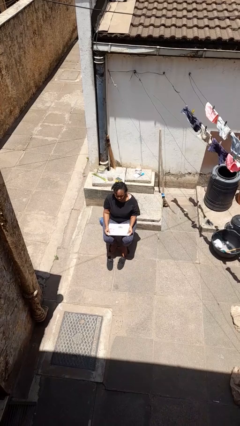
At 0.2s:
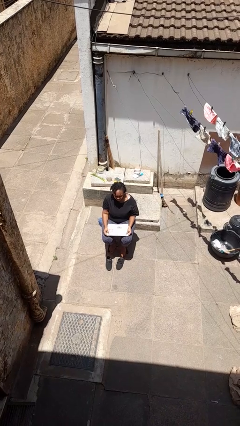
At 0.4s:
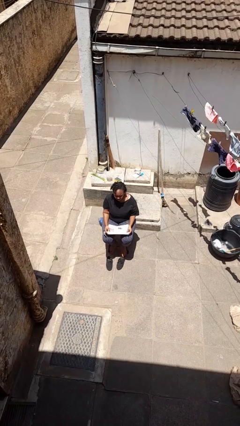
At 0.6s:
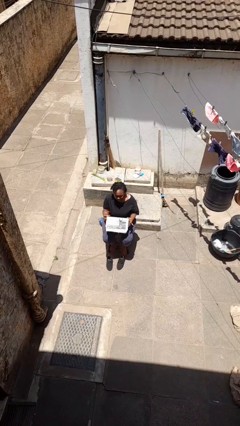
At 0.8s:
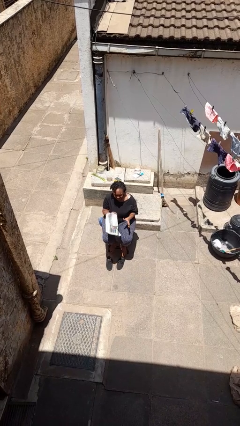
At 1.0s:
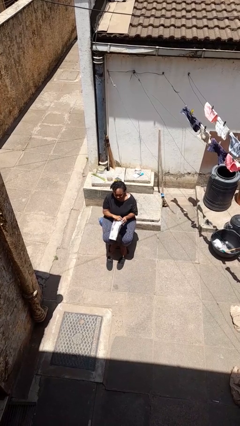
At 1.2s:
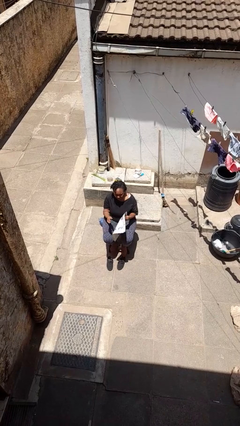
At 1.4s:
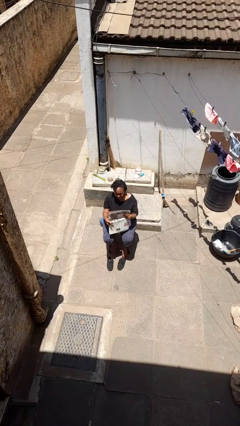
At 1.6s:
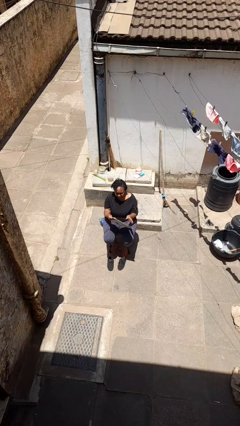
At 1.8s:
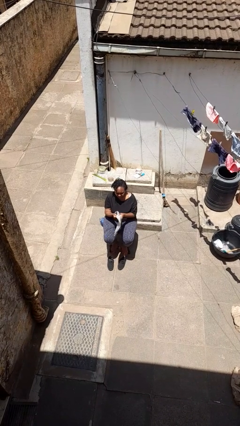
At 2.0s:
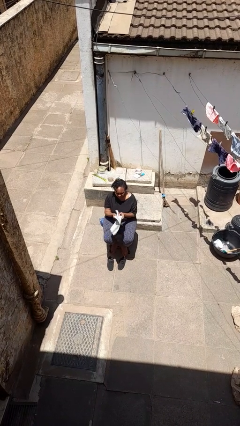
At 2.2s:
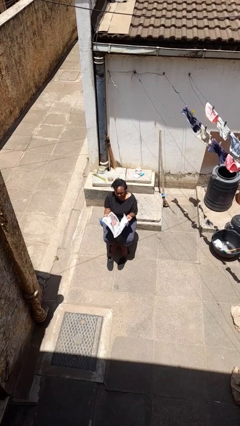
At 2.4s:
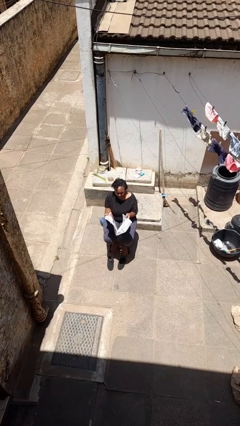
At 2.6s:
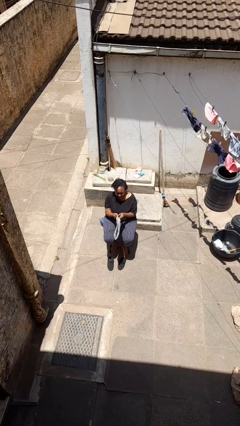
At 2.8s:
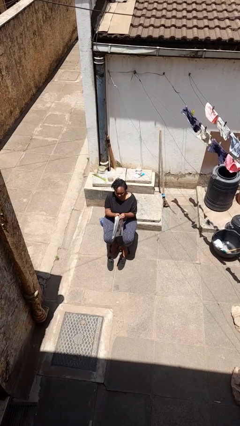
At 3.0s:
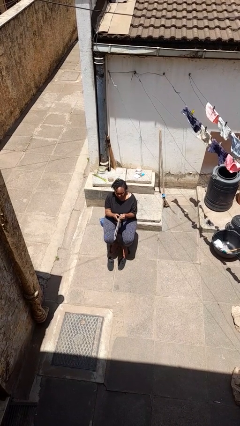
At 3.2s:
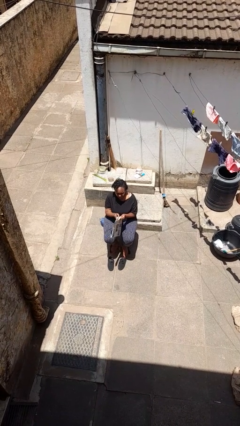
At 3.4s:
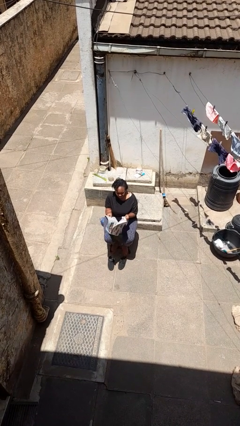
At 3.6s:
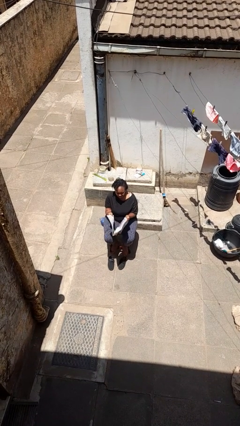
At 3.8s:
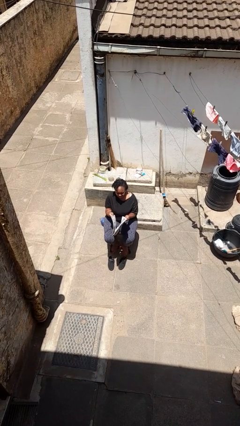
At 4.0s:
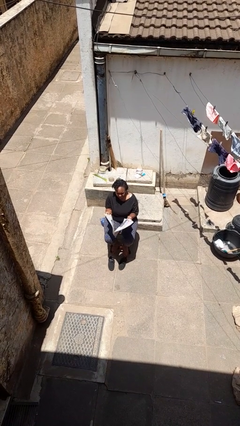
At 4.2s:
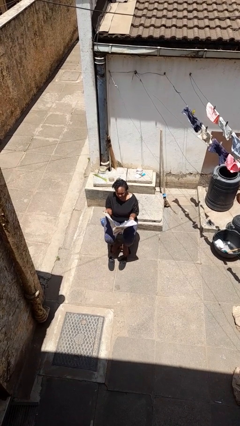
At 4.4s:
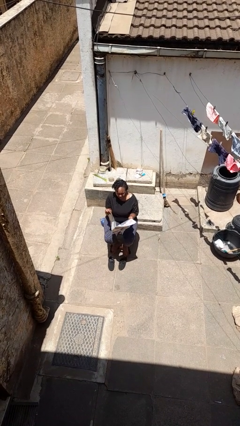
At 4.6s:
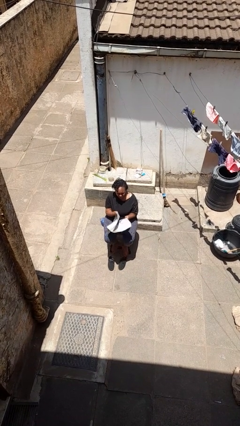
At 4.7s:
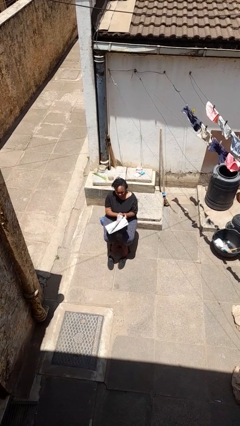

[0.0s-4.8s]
person reads newspaper

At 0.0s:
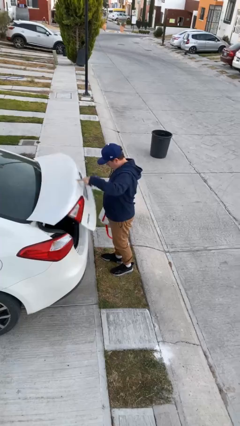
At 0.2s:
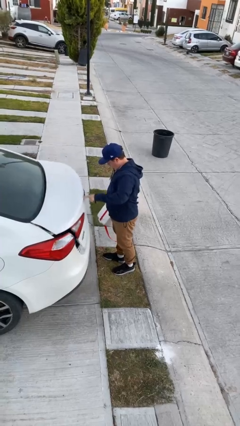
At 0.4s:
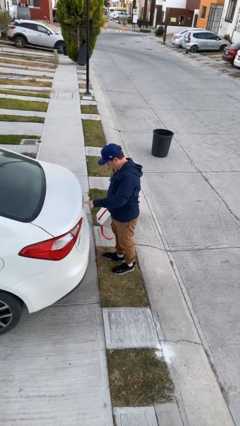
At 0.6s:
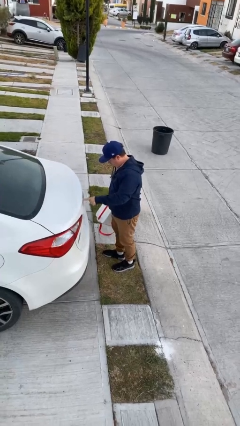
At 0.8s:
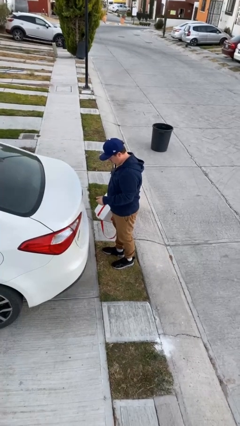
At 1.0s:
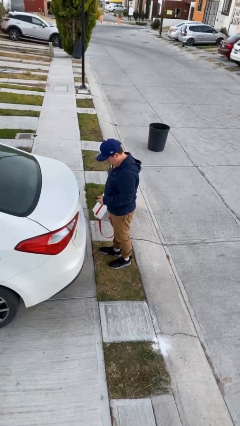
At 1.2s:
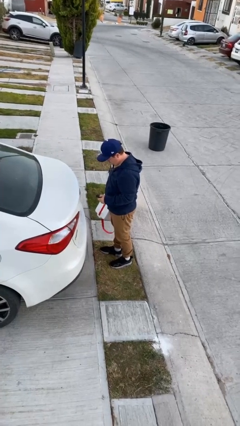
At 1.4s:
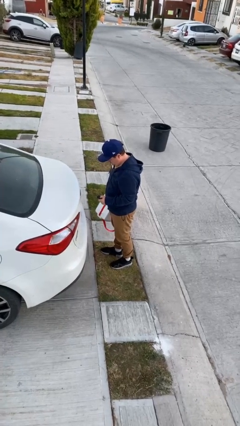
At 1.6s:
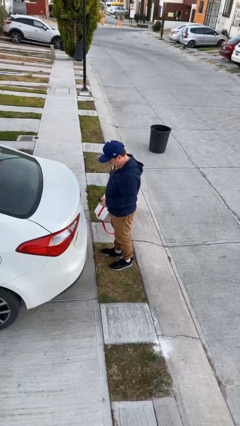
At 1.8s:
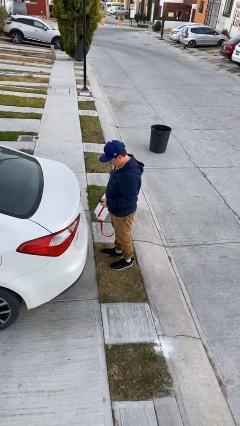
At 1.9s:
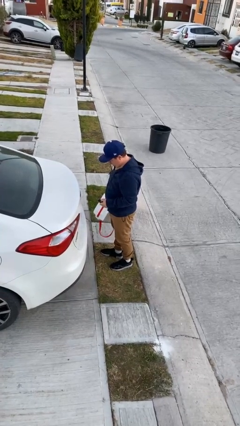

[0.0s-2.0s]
person closes car trunk

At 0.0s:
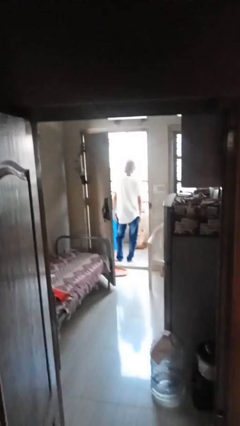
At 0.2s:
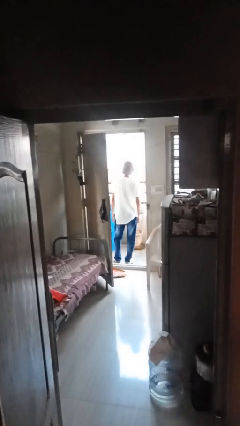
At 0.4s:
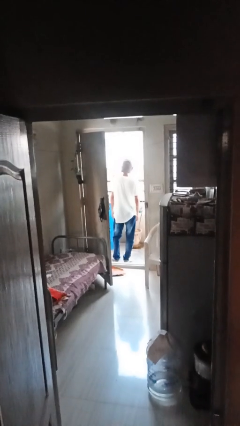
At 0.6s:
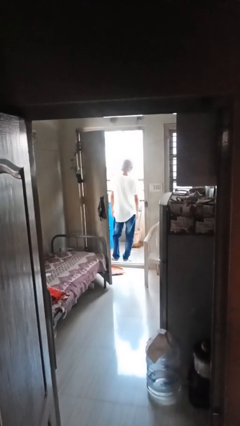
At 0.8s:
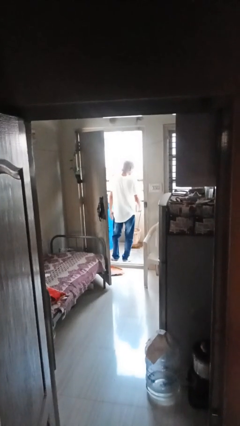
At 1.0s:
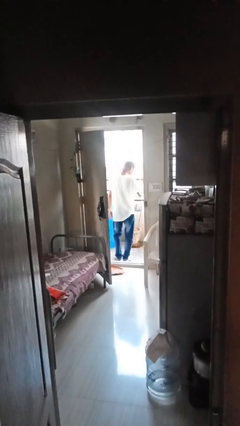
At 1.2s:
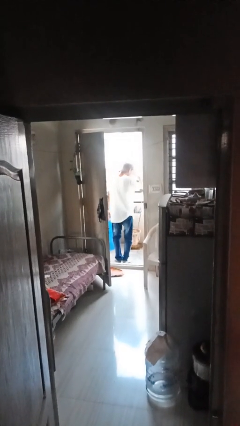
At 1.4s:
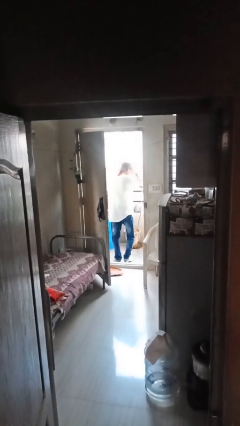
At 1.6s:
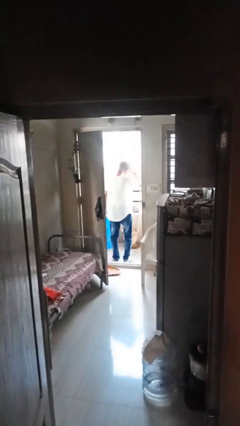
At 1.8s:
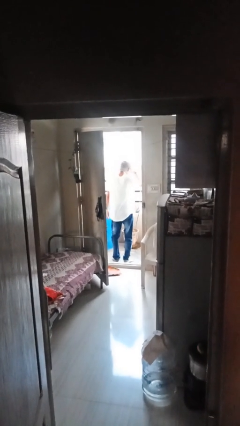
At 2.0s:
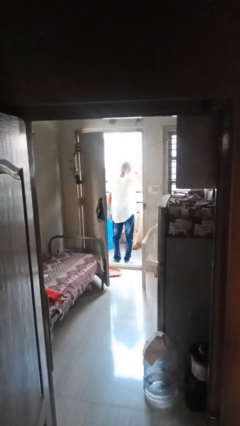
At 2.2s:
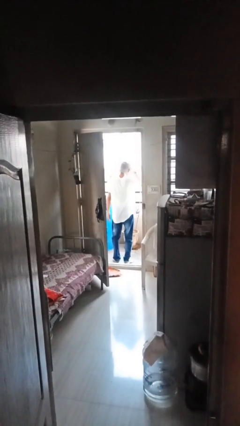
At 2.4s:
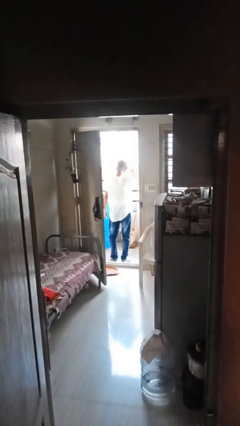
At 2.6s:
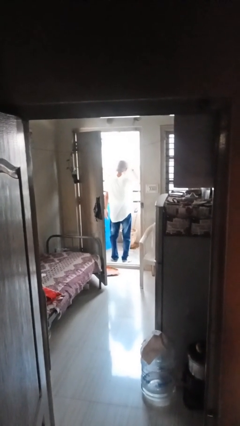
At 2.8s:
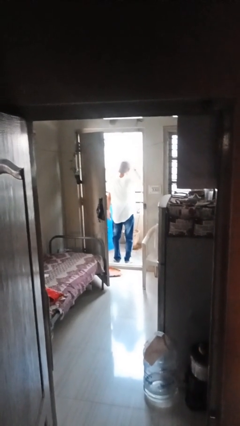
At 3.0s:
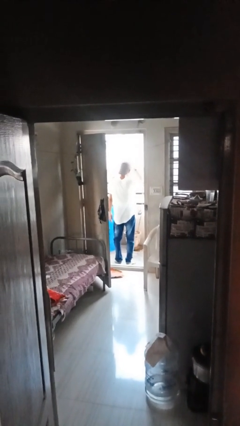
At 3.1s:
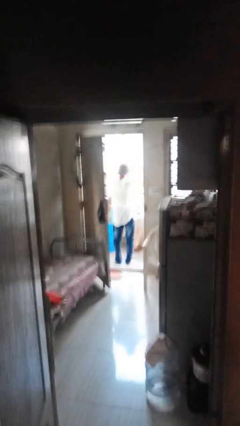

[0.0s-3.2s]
person shades eyes

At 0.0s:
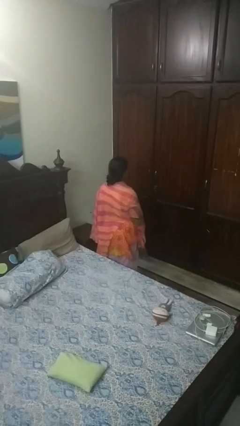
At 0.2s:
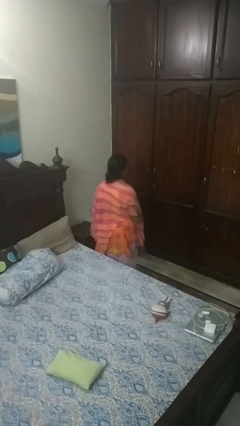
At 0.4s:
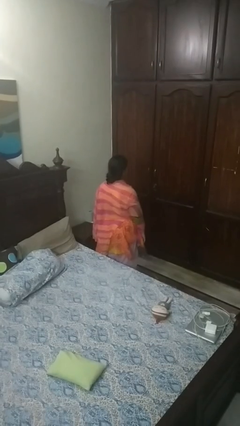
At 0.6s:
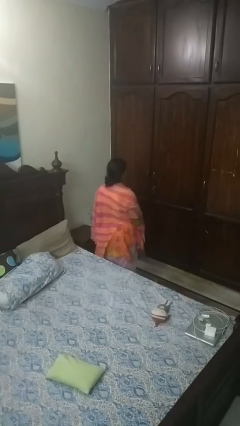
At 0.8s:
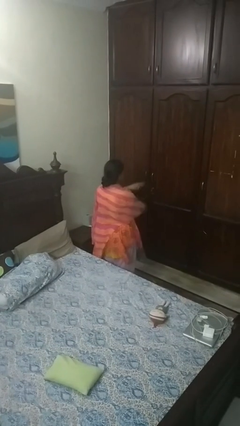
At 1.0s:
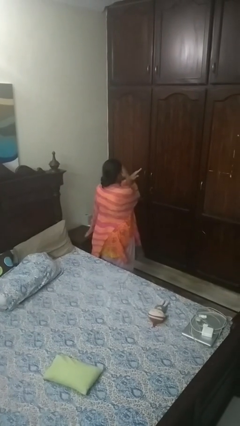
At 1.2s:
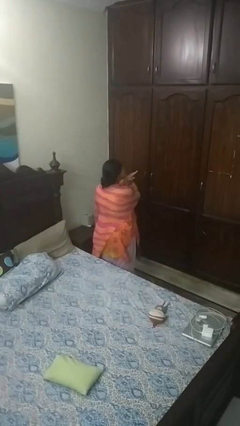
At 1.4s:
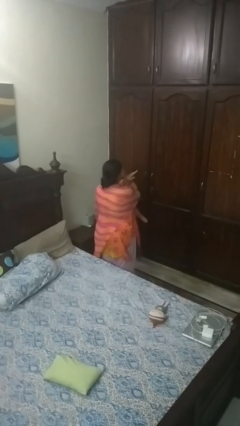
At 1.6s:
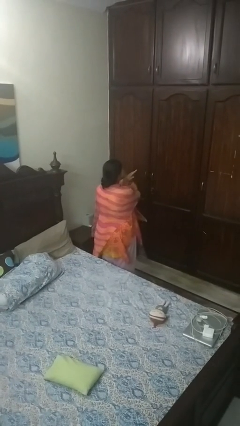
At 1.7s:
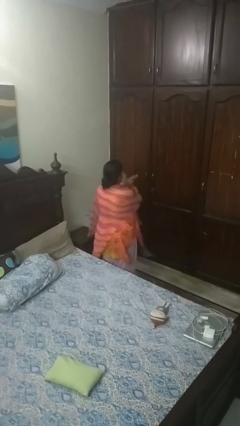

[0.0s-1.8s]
person gestures arms x

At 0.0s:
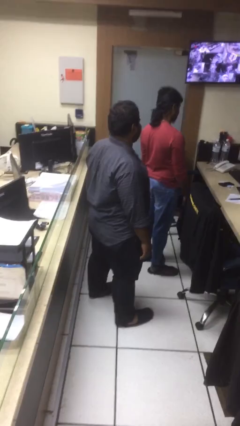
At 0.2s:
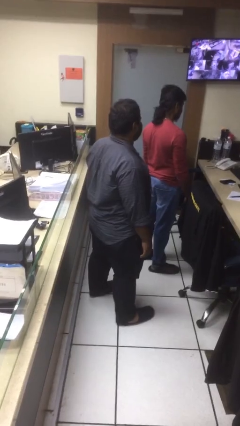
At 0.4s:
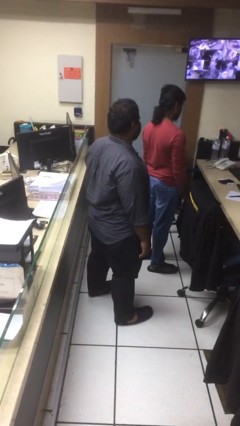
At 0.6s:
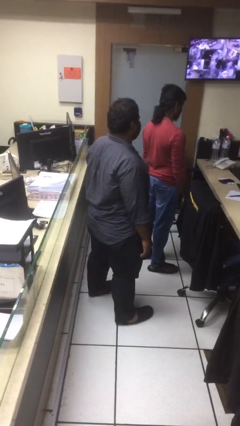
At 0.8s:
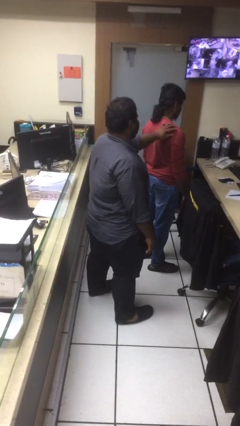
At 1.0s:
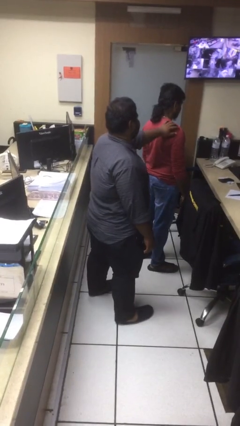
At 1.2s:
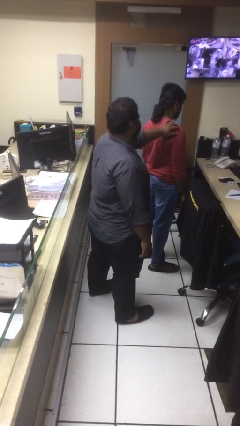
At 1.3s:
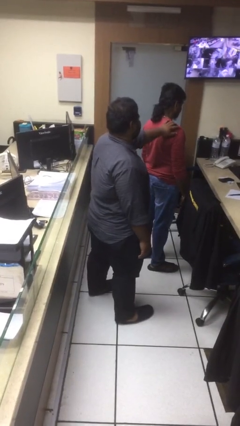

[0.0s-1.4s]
person grabs person by shoulder

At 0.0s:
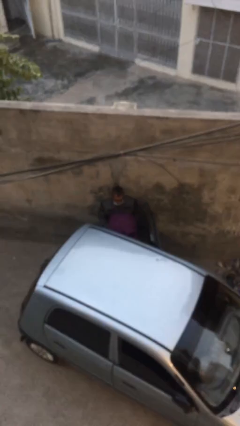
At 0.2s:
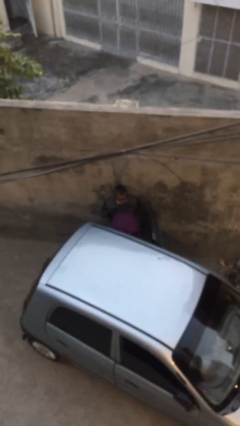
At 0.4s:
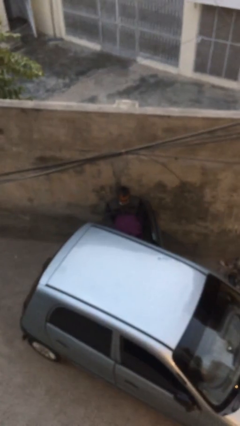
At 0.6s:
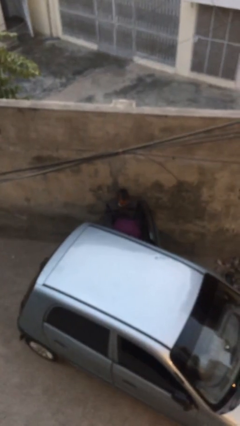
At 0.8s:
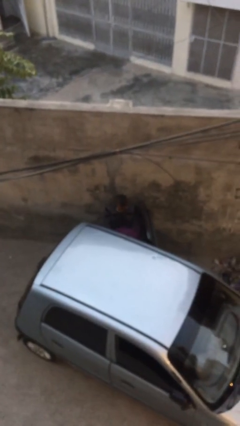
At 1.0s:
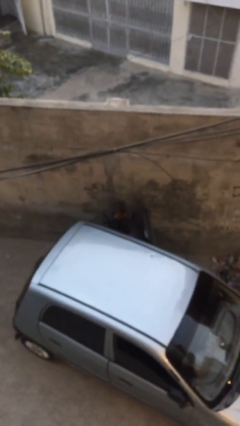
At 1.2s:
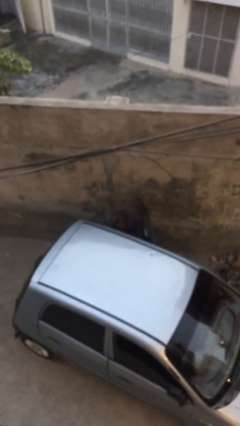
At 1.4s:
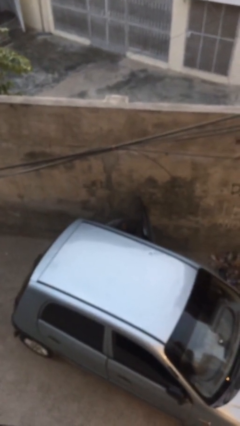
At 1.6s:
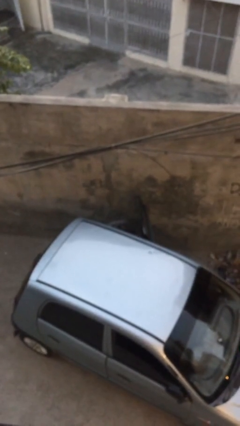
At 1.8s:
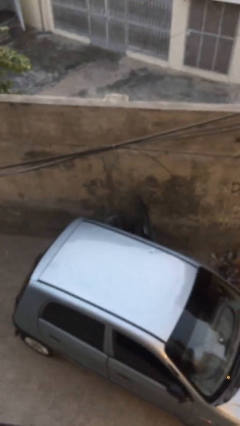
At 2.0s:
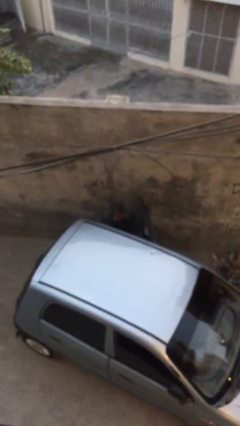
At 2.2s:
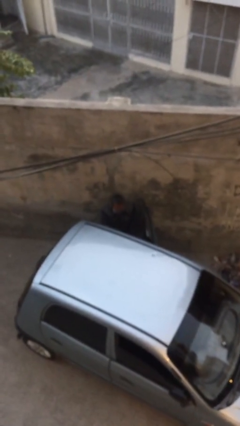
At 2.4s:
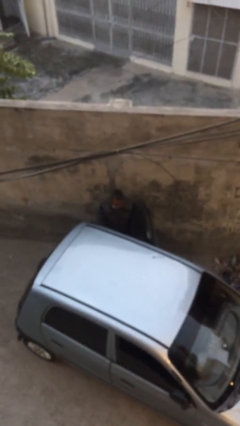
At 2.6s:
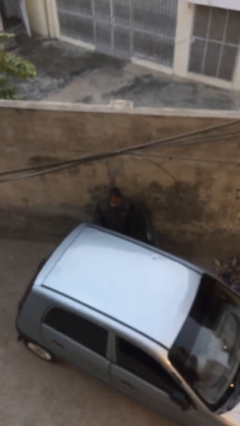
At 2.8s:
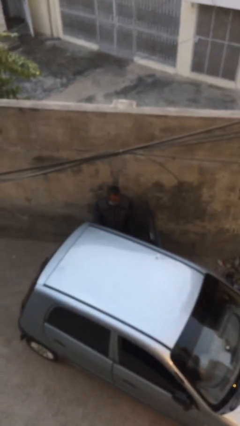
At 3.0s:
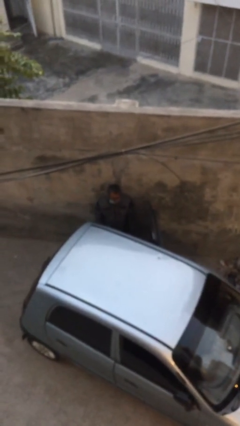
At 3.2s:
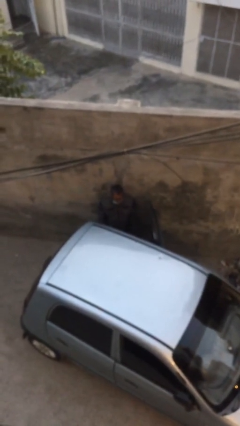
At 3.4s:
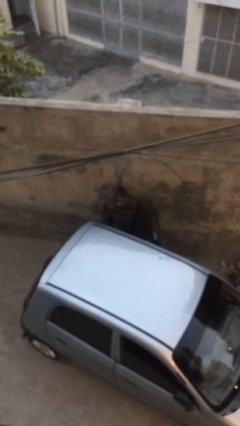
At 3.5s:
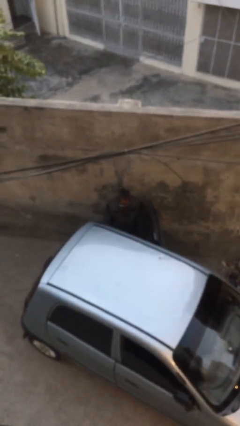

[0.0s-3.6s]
person loads car

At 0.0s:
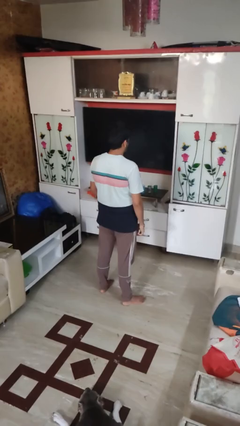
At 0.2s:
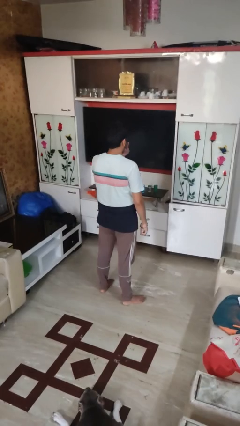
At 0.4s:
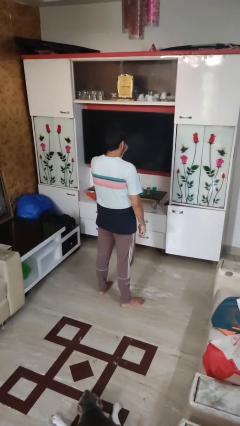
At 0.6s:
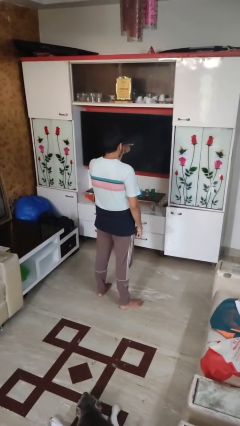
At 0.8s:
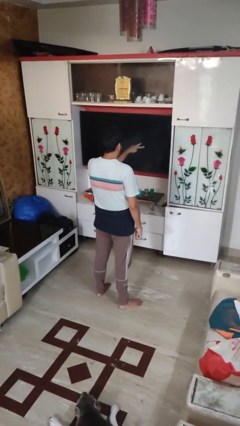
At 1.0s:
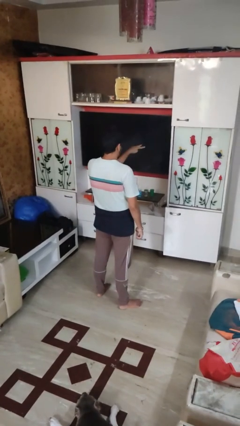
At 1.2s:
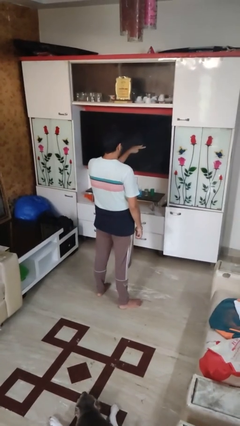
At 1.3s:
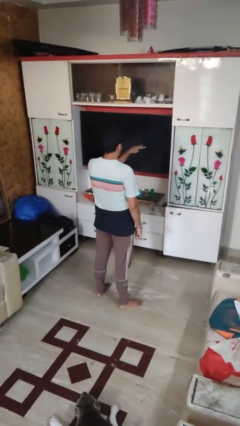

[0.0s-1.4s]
person gestures watch closely
